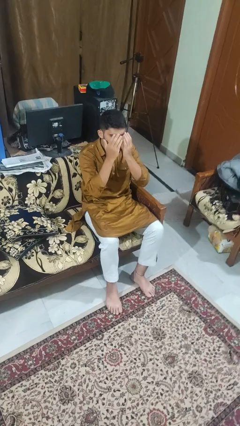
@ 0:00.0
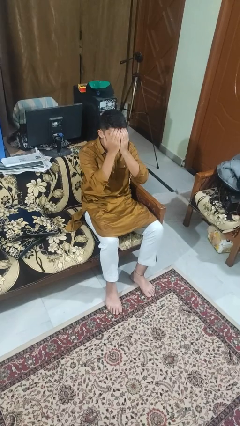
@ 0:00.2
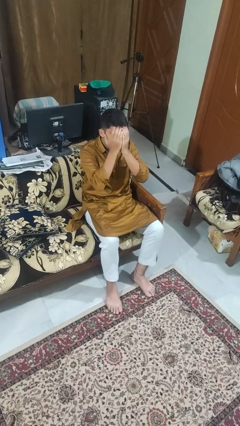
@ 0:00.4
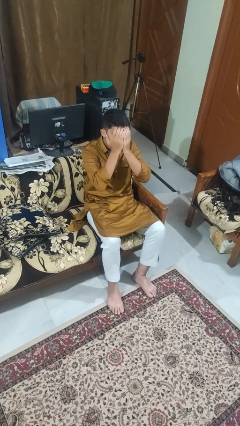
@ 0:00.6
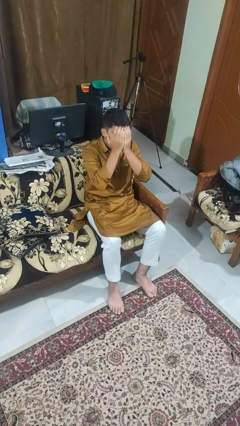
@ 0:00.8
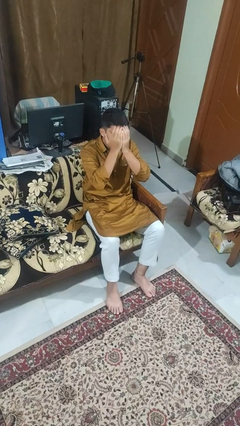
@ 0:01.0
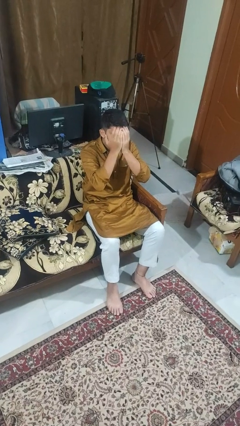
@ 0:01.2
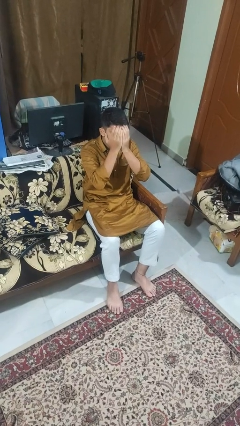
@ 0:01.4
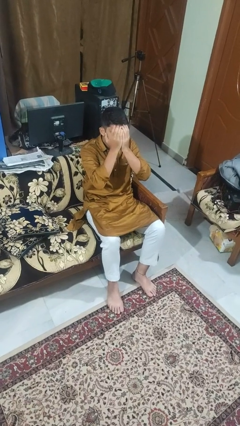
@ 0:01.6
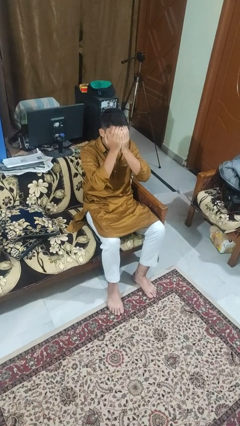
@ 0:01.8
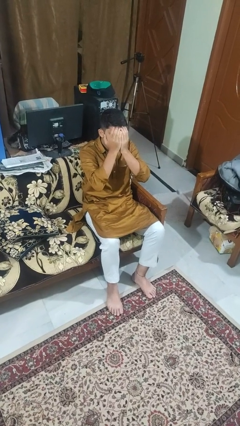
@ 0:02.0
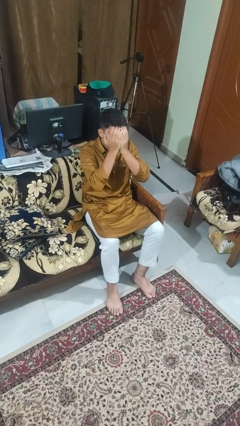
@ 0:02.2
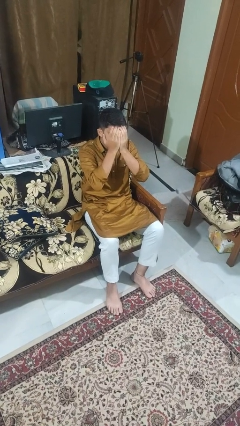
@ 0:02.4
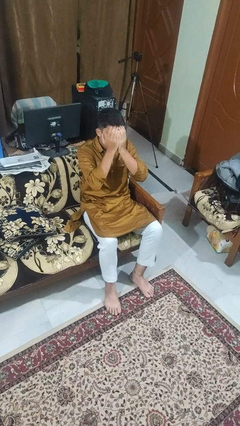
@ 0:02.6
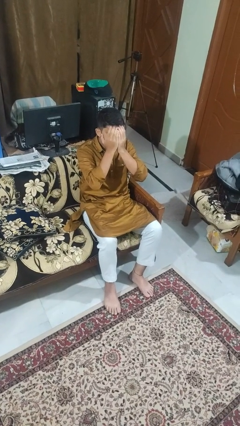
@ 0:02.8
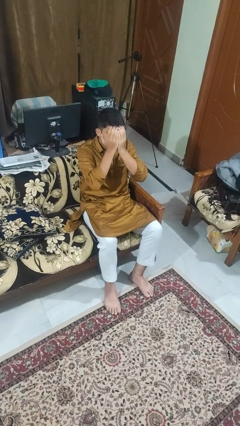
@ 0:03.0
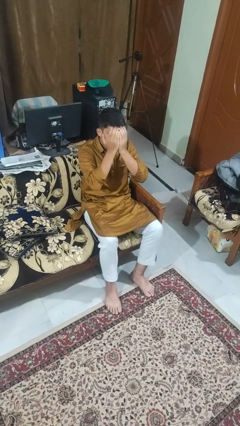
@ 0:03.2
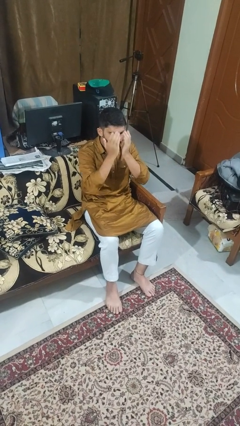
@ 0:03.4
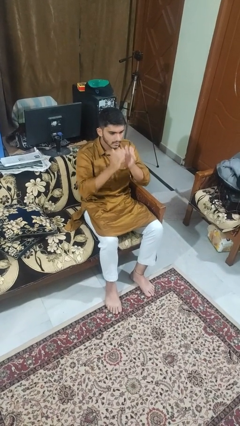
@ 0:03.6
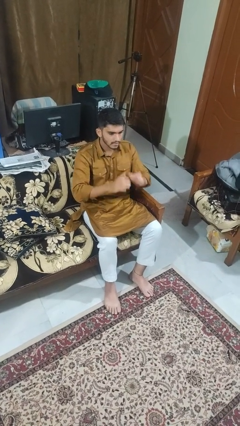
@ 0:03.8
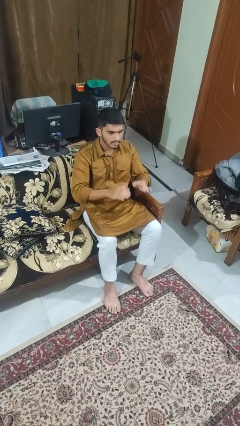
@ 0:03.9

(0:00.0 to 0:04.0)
person covers face with hands

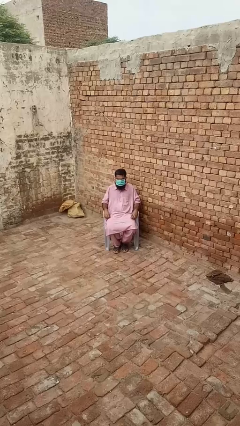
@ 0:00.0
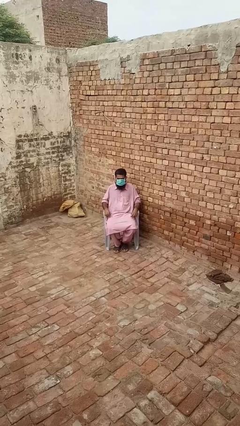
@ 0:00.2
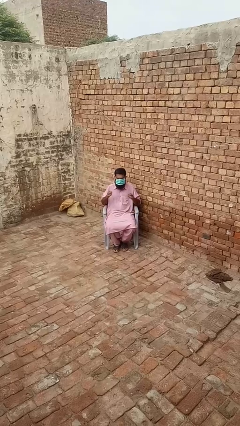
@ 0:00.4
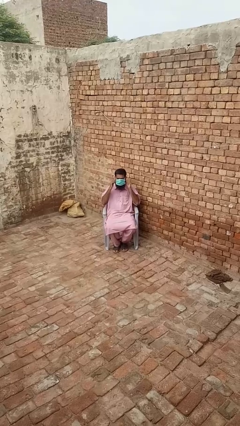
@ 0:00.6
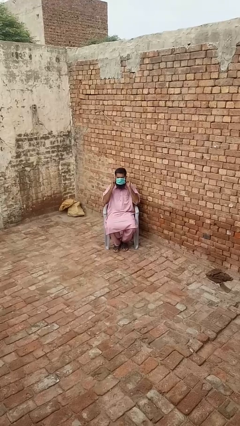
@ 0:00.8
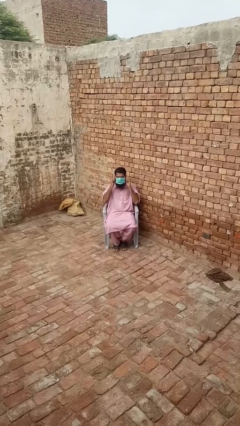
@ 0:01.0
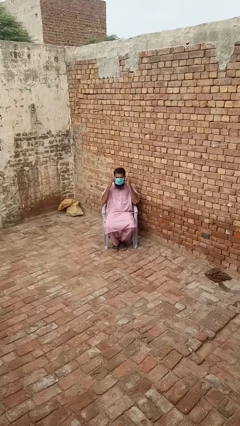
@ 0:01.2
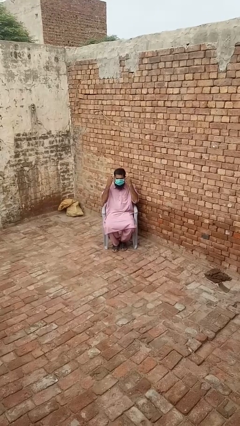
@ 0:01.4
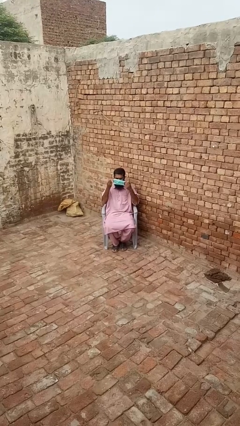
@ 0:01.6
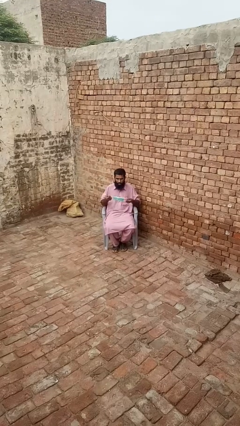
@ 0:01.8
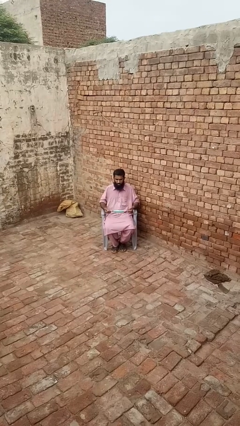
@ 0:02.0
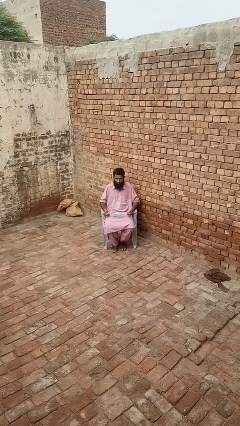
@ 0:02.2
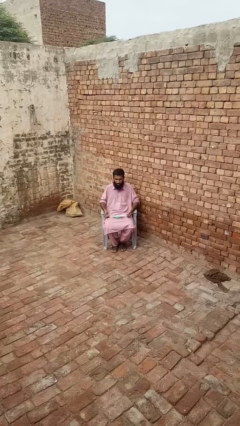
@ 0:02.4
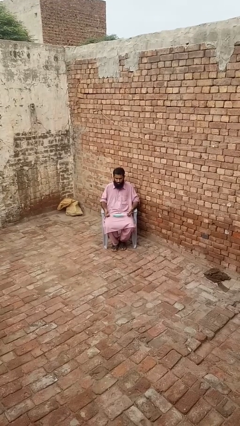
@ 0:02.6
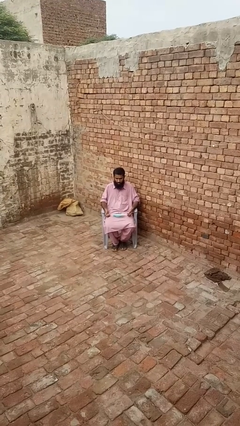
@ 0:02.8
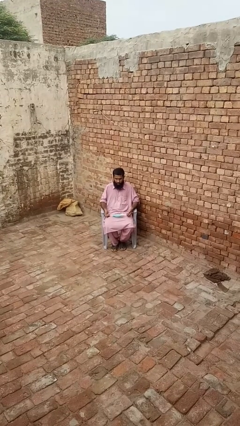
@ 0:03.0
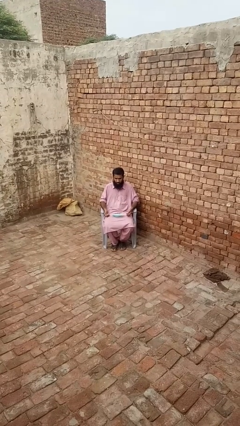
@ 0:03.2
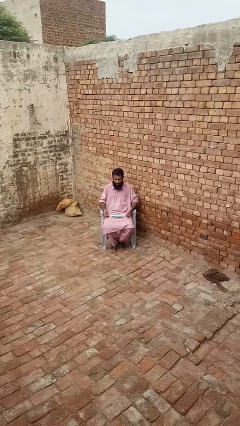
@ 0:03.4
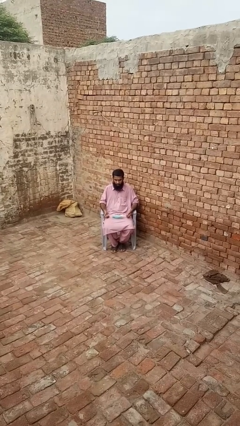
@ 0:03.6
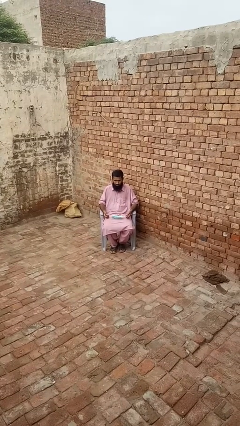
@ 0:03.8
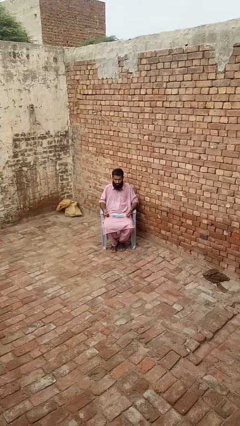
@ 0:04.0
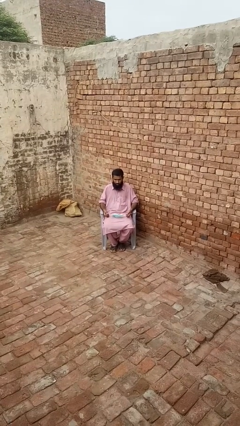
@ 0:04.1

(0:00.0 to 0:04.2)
person takes off facemask

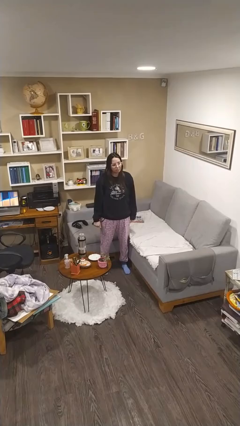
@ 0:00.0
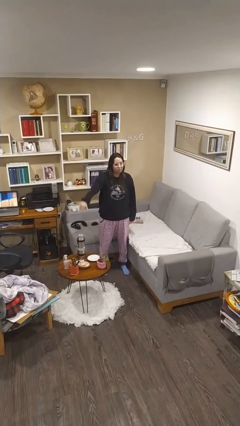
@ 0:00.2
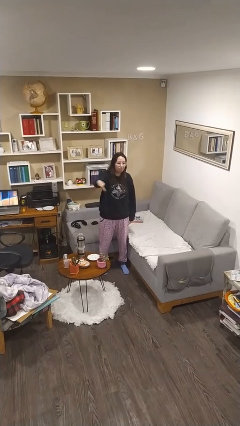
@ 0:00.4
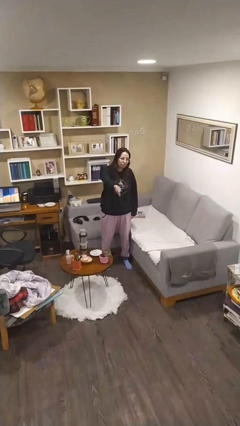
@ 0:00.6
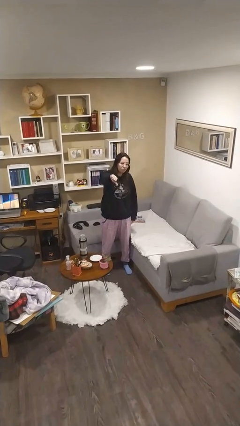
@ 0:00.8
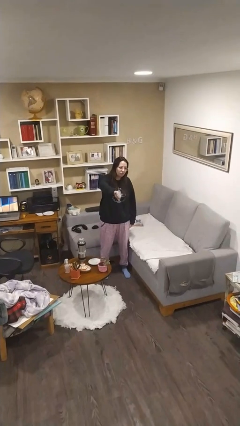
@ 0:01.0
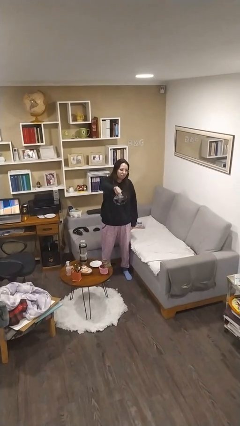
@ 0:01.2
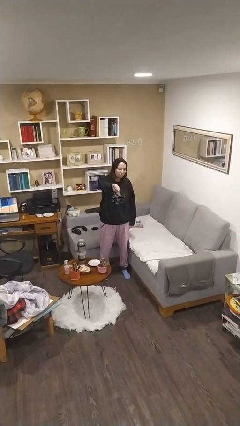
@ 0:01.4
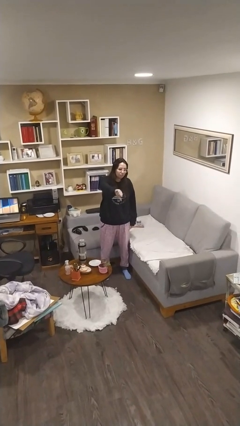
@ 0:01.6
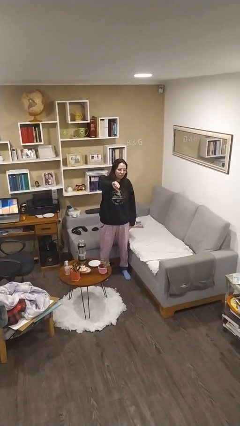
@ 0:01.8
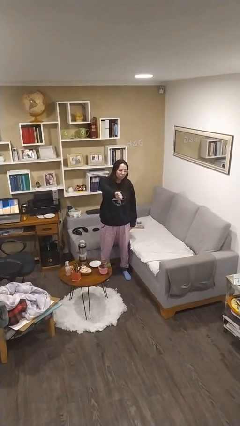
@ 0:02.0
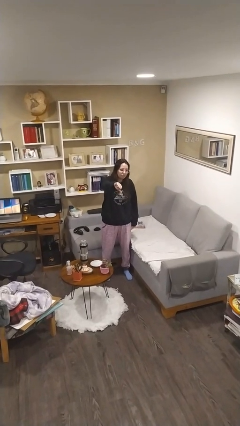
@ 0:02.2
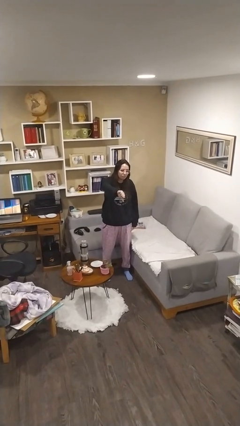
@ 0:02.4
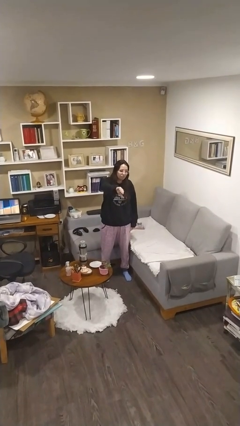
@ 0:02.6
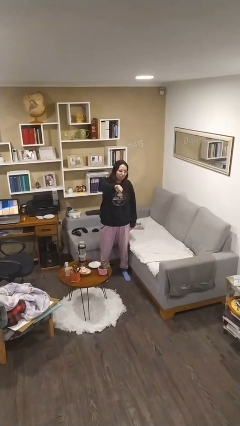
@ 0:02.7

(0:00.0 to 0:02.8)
person gestures thumbs down

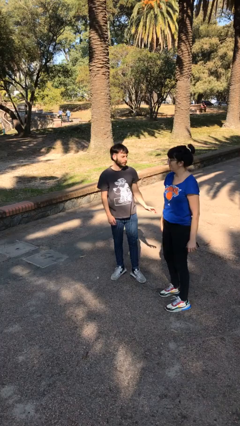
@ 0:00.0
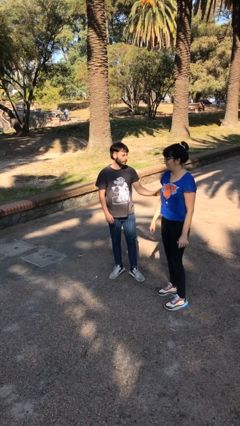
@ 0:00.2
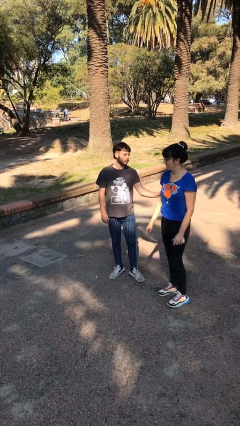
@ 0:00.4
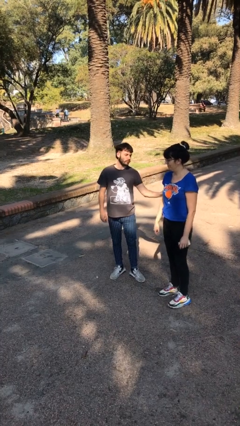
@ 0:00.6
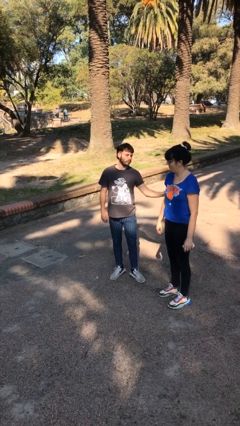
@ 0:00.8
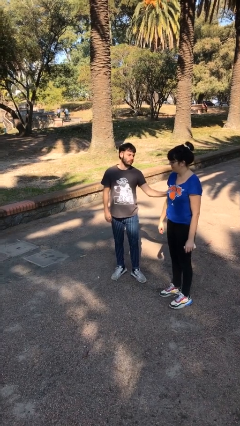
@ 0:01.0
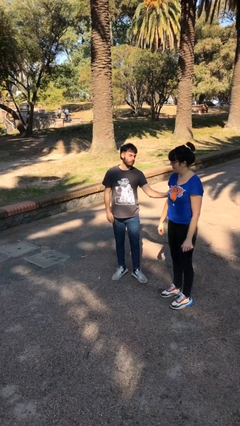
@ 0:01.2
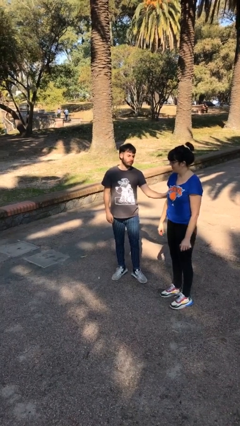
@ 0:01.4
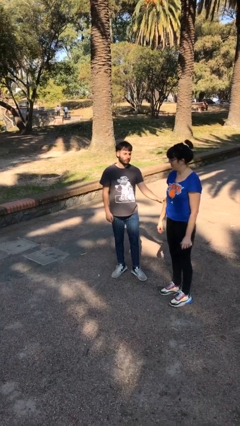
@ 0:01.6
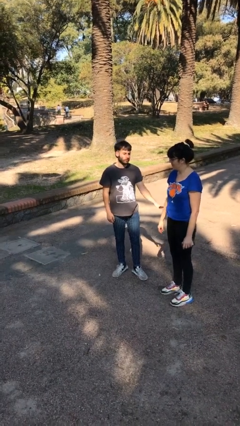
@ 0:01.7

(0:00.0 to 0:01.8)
person grabs person by bicep

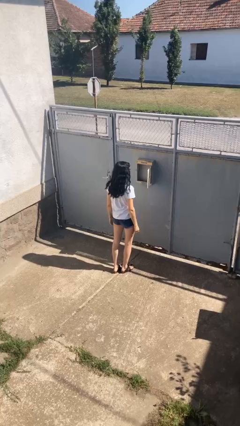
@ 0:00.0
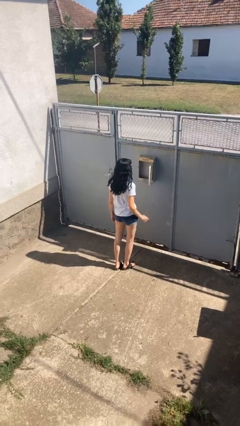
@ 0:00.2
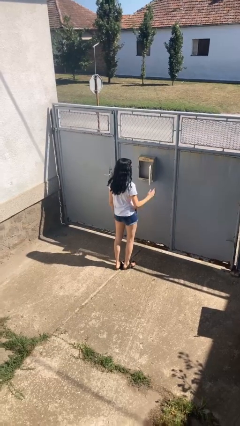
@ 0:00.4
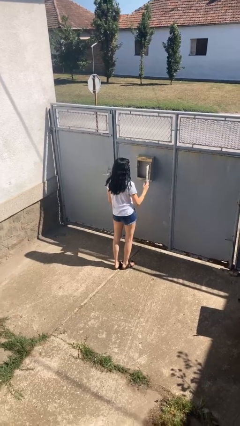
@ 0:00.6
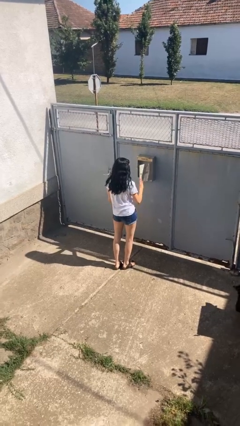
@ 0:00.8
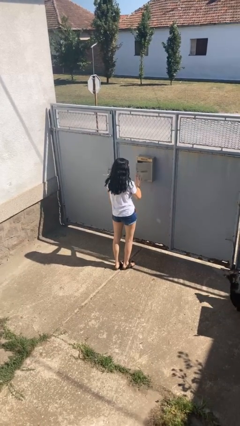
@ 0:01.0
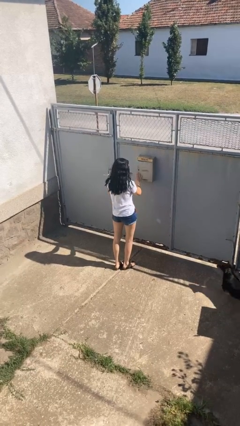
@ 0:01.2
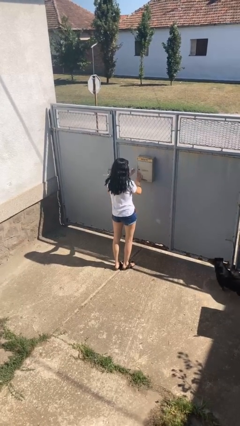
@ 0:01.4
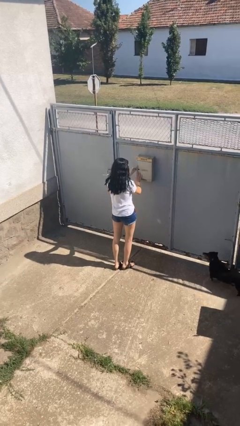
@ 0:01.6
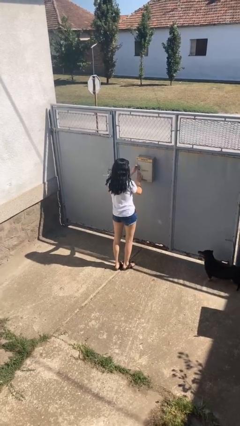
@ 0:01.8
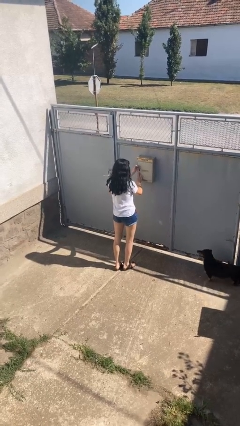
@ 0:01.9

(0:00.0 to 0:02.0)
person closes mailbox

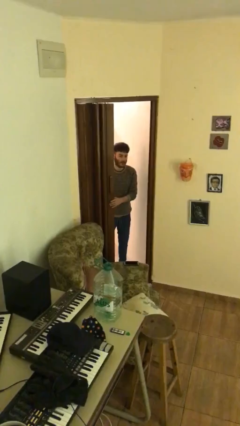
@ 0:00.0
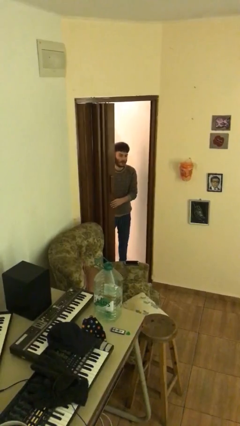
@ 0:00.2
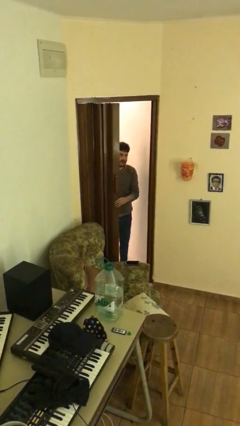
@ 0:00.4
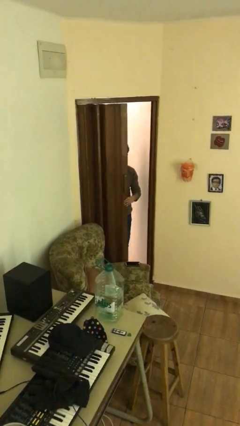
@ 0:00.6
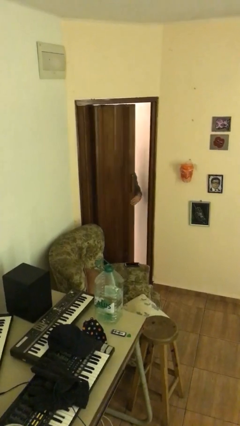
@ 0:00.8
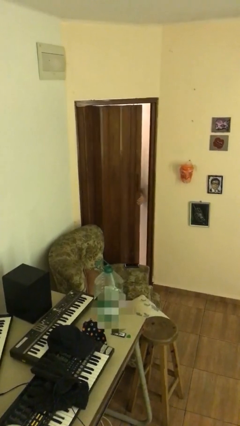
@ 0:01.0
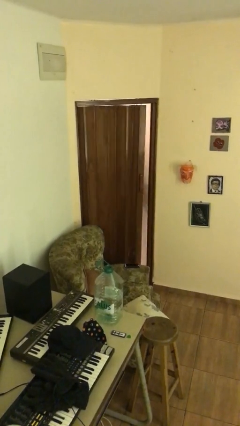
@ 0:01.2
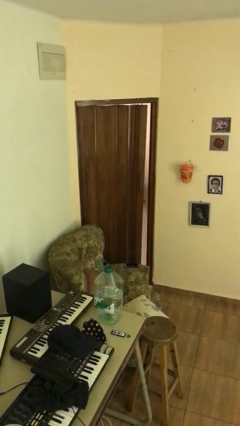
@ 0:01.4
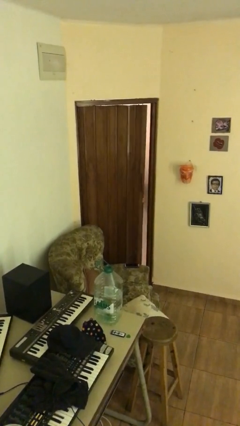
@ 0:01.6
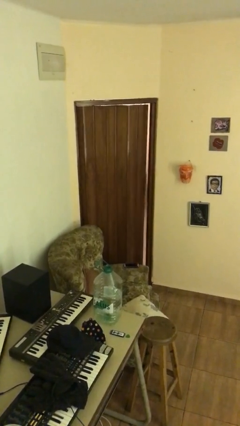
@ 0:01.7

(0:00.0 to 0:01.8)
person closes sliding door

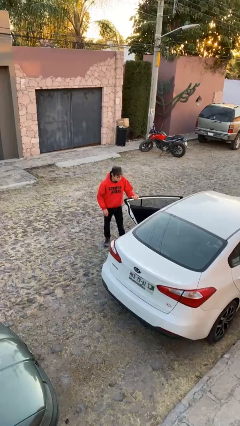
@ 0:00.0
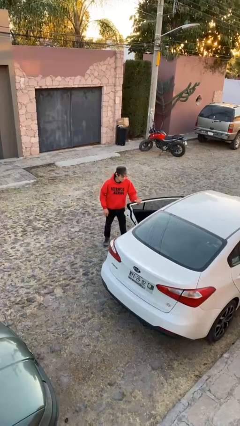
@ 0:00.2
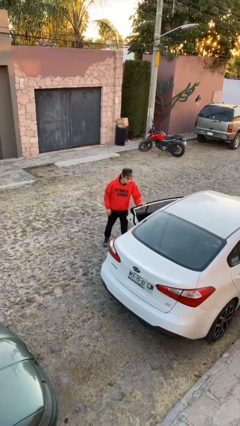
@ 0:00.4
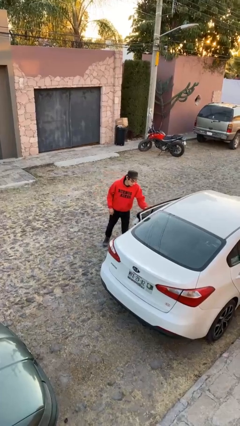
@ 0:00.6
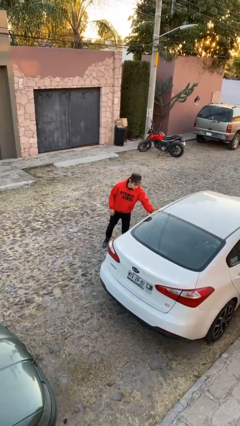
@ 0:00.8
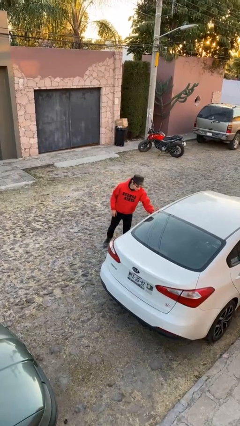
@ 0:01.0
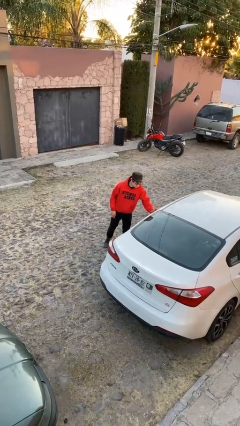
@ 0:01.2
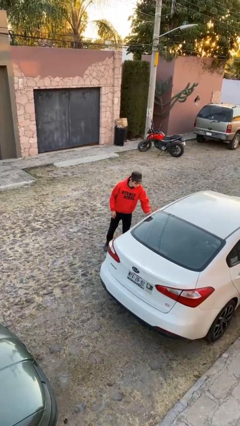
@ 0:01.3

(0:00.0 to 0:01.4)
person closes car door
